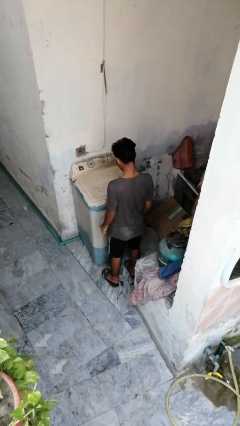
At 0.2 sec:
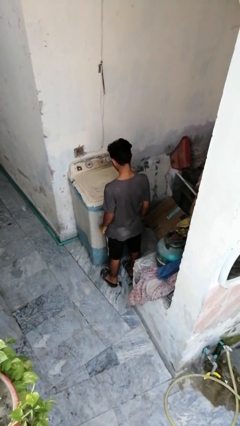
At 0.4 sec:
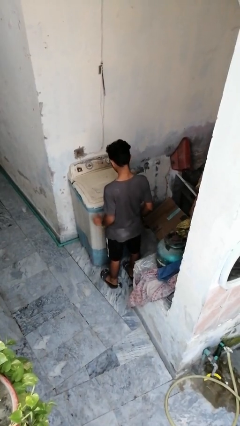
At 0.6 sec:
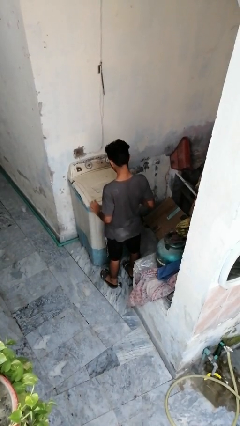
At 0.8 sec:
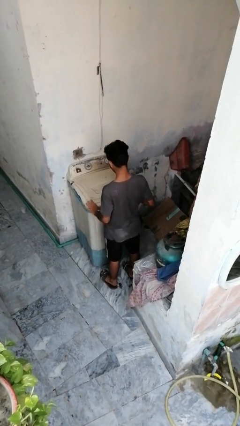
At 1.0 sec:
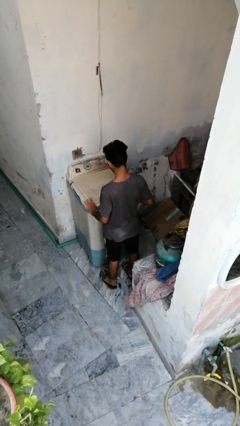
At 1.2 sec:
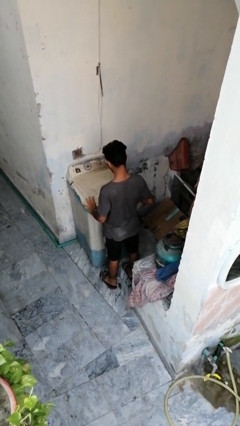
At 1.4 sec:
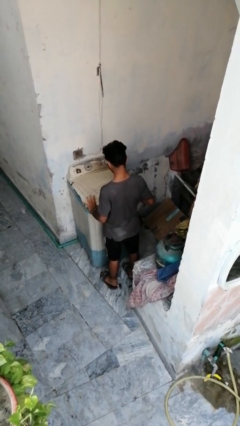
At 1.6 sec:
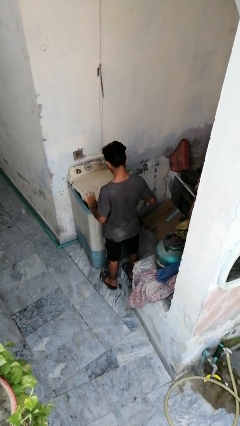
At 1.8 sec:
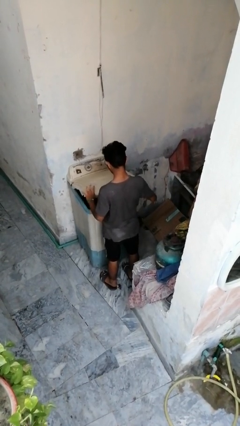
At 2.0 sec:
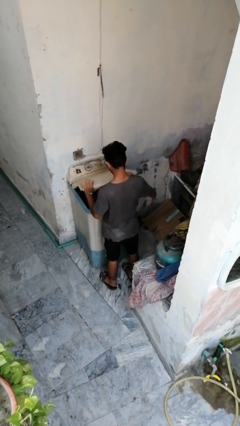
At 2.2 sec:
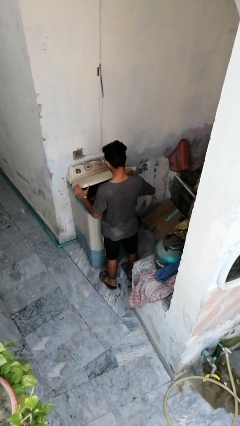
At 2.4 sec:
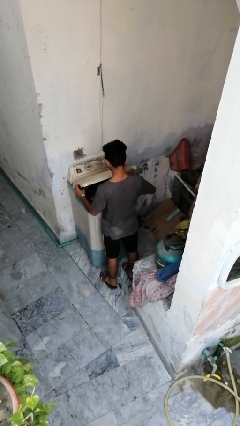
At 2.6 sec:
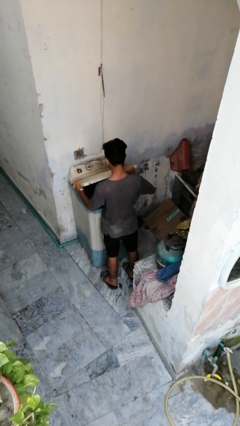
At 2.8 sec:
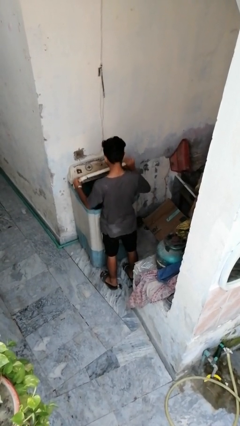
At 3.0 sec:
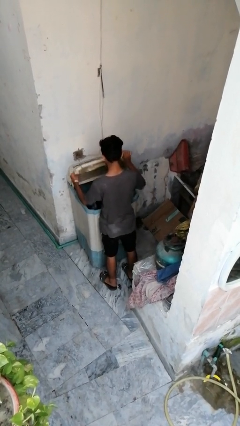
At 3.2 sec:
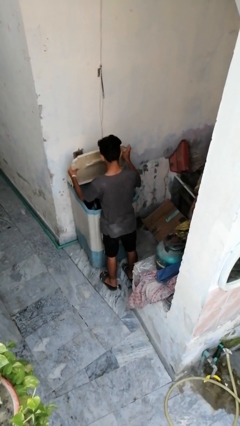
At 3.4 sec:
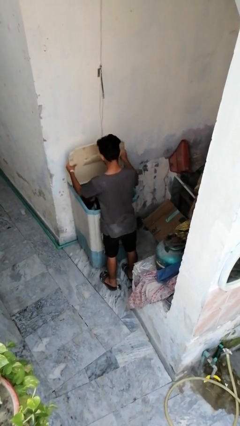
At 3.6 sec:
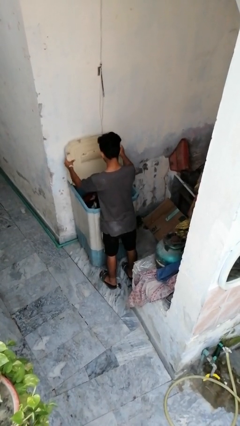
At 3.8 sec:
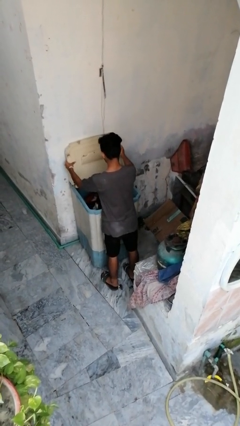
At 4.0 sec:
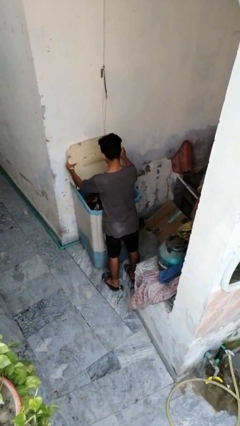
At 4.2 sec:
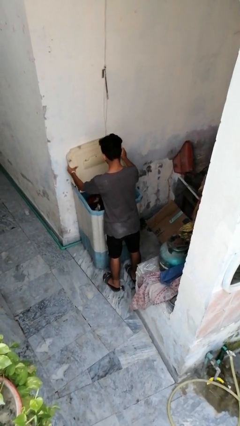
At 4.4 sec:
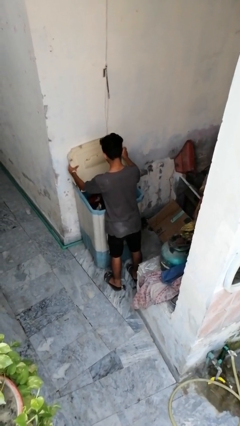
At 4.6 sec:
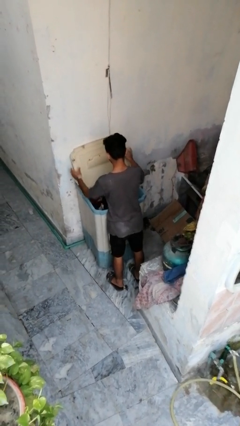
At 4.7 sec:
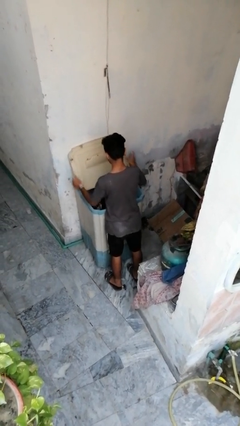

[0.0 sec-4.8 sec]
person opens clothes washer

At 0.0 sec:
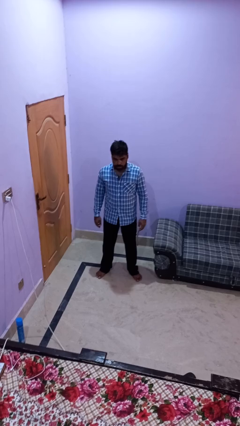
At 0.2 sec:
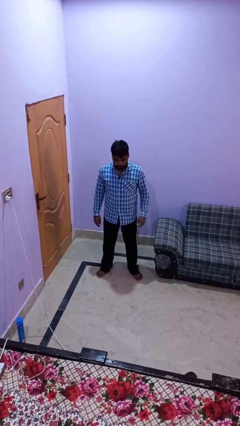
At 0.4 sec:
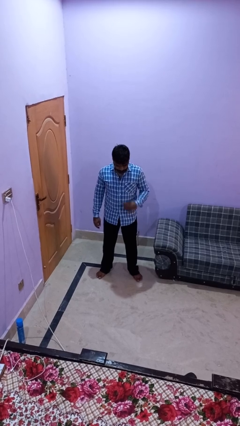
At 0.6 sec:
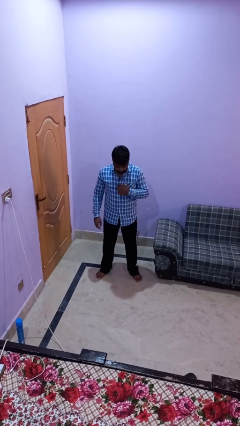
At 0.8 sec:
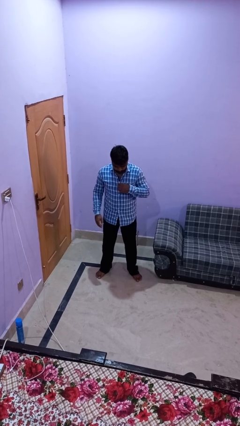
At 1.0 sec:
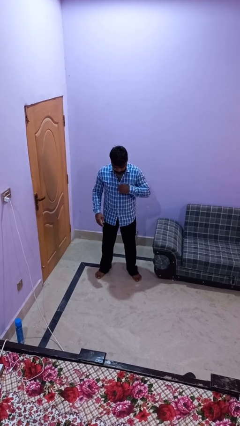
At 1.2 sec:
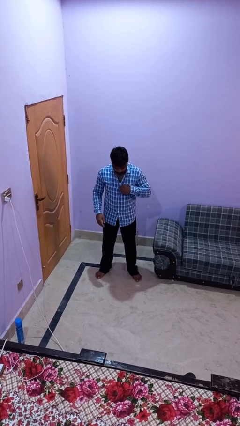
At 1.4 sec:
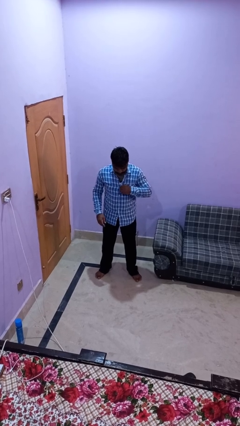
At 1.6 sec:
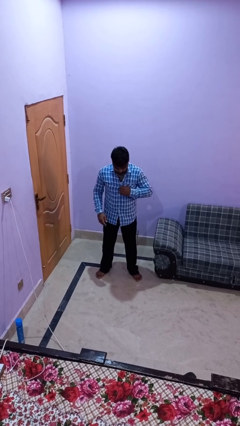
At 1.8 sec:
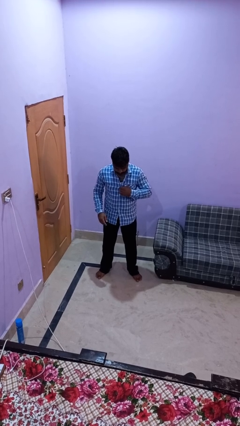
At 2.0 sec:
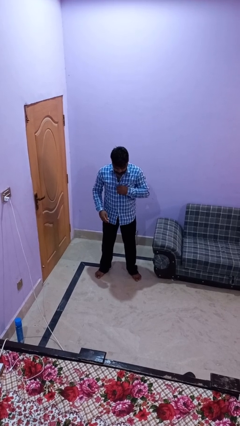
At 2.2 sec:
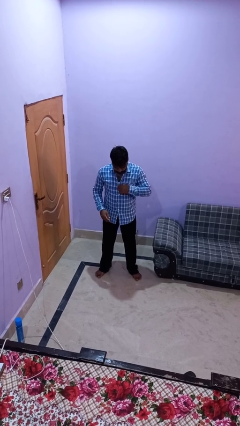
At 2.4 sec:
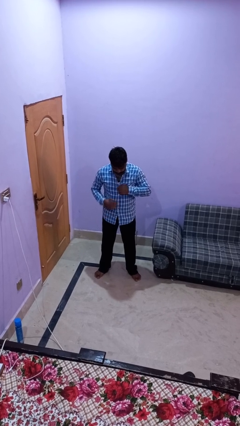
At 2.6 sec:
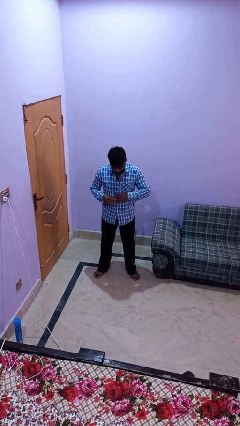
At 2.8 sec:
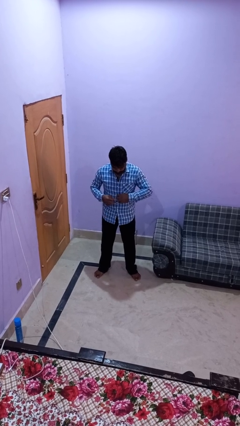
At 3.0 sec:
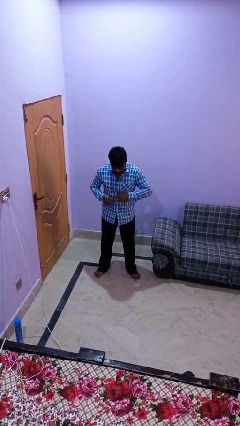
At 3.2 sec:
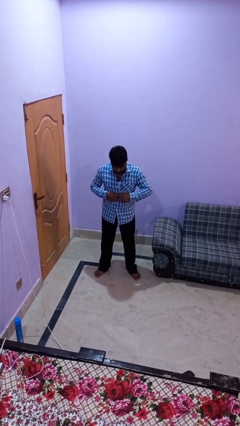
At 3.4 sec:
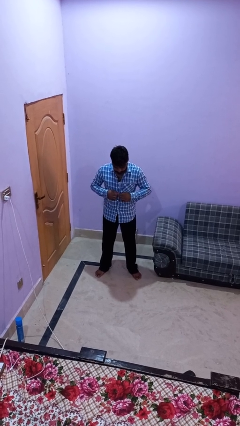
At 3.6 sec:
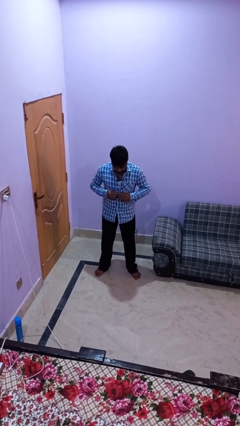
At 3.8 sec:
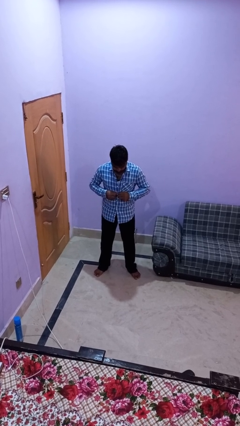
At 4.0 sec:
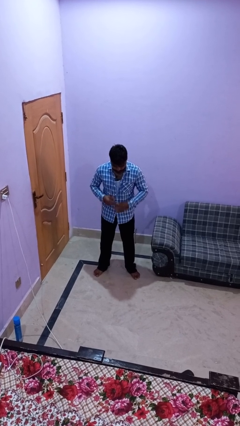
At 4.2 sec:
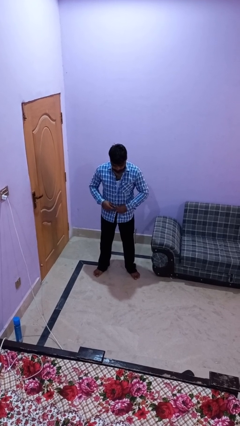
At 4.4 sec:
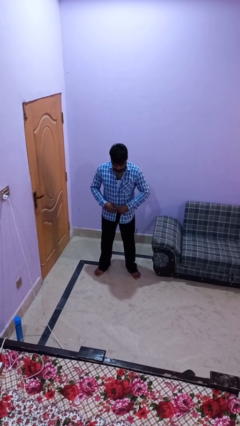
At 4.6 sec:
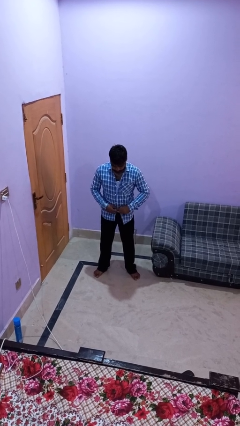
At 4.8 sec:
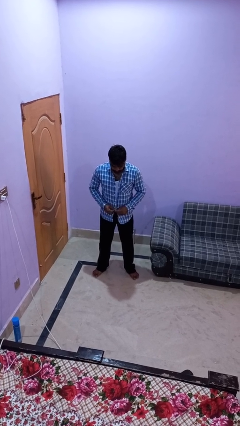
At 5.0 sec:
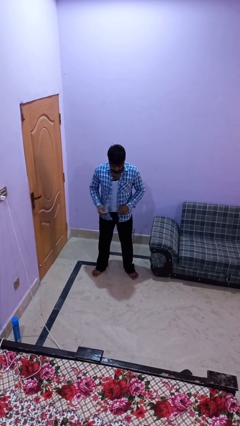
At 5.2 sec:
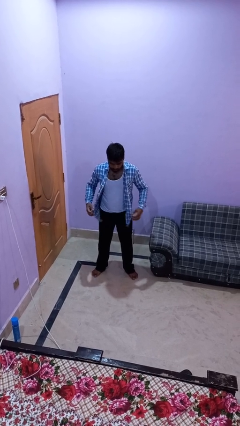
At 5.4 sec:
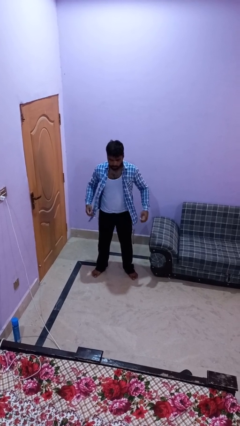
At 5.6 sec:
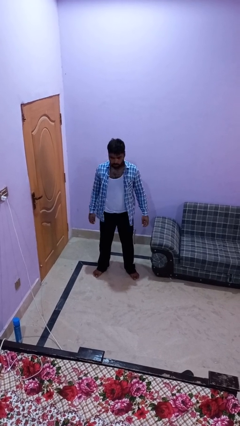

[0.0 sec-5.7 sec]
person unbuttons shirt

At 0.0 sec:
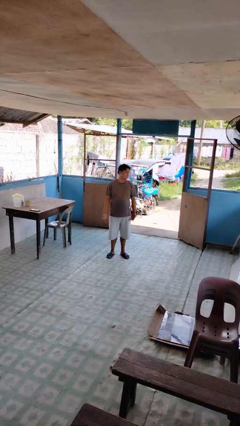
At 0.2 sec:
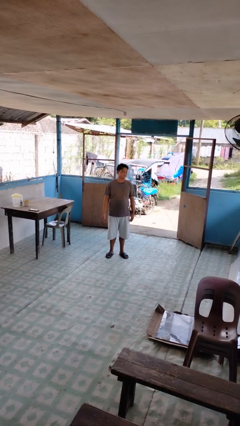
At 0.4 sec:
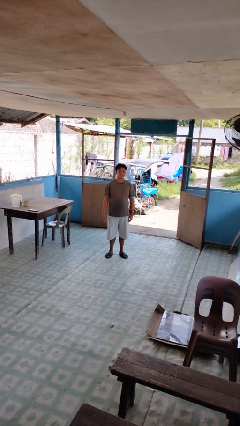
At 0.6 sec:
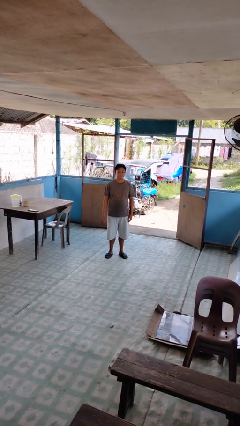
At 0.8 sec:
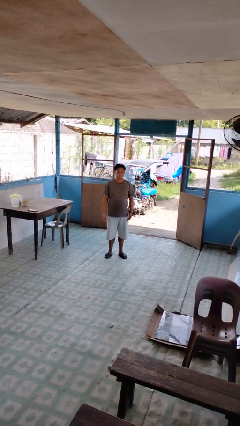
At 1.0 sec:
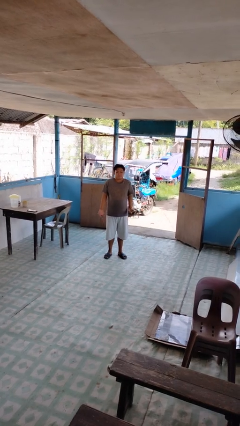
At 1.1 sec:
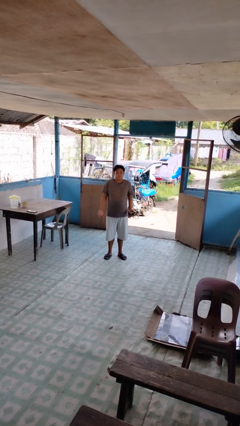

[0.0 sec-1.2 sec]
person shrugs

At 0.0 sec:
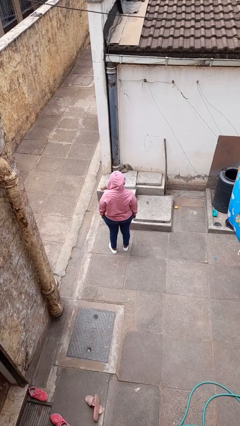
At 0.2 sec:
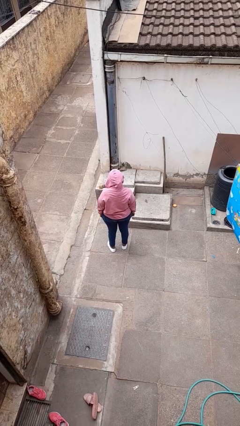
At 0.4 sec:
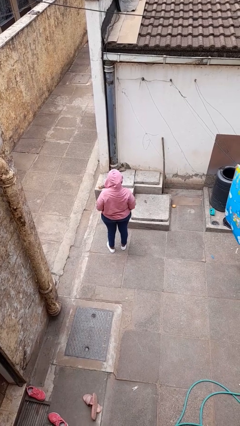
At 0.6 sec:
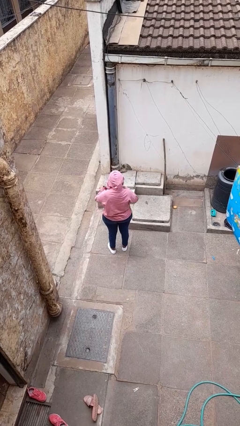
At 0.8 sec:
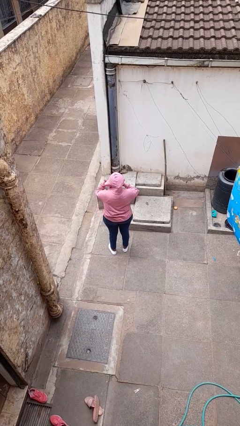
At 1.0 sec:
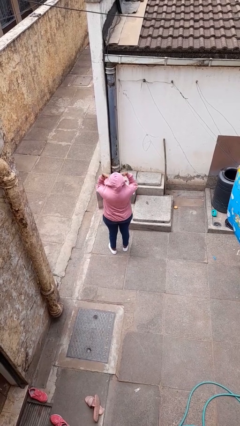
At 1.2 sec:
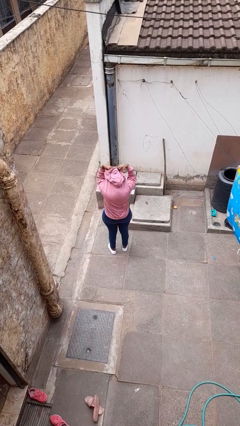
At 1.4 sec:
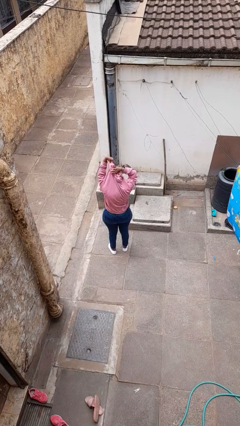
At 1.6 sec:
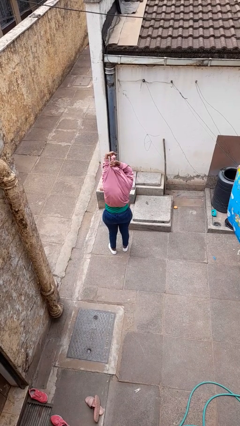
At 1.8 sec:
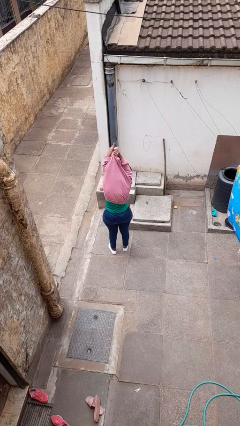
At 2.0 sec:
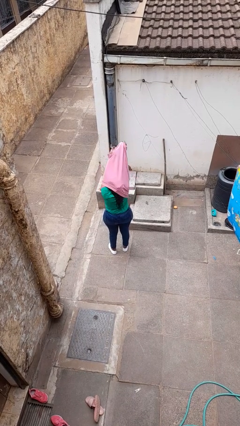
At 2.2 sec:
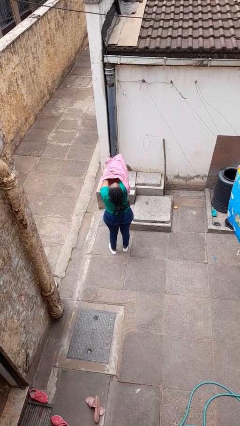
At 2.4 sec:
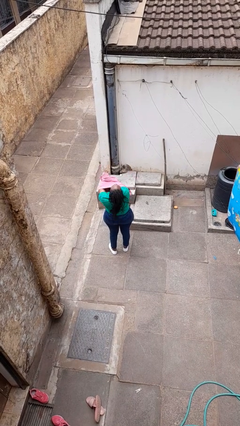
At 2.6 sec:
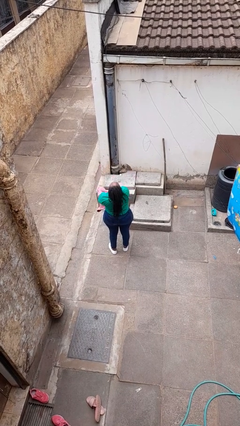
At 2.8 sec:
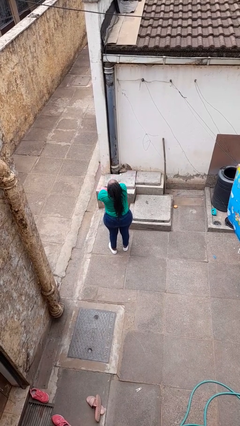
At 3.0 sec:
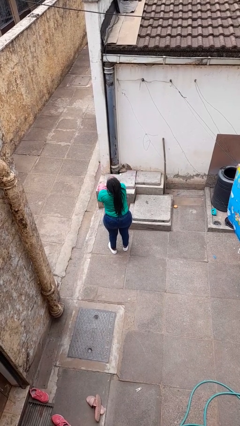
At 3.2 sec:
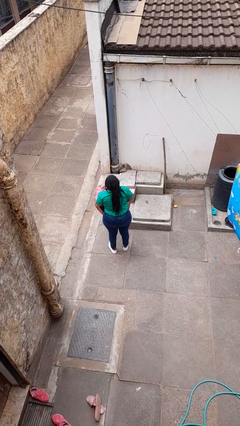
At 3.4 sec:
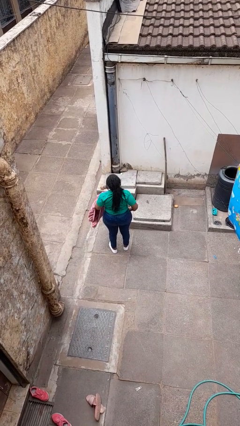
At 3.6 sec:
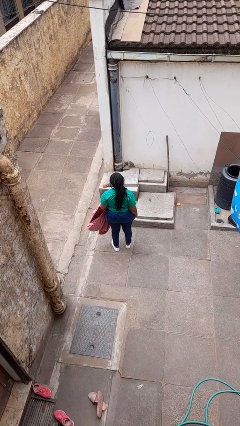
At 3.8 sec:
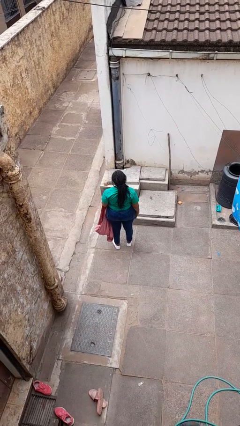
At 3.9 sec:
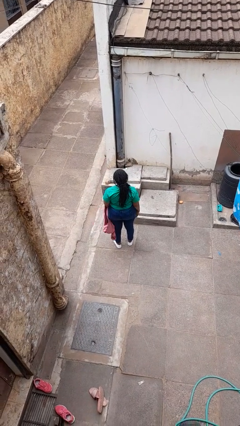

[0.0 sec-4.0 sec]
person takes off hoodie

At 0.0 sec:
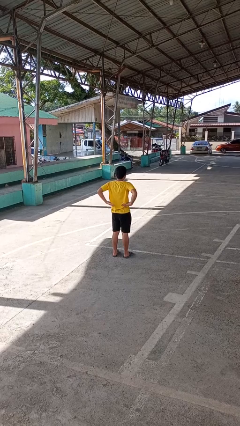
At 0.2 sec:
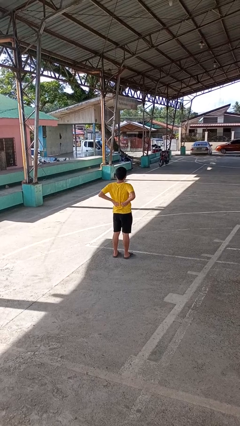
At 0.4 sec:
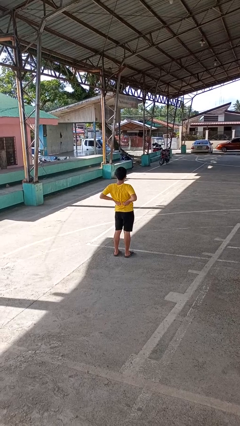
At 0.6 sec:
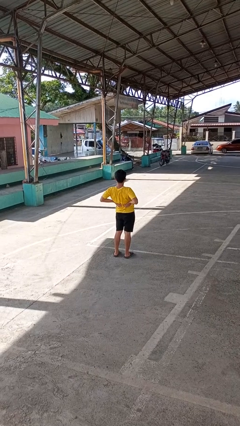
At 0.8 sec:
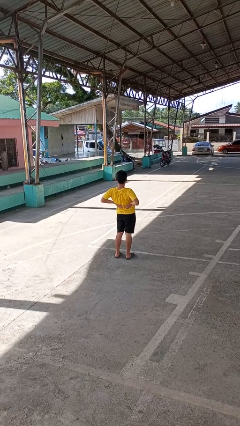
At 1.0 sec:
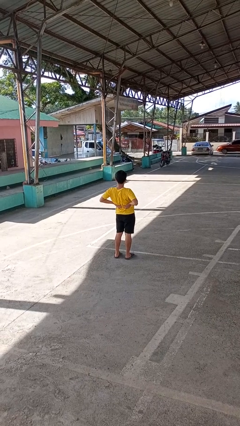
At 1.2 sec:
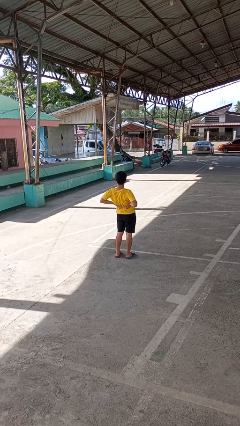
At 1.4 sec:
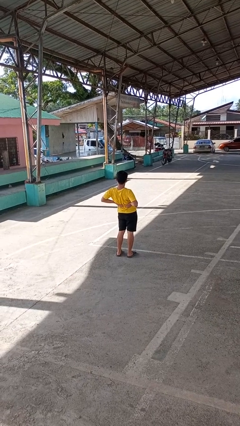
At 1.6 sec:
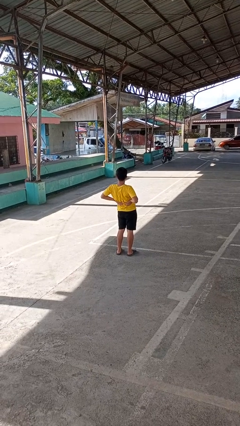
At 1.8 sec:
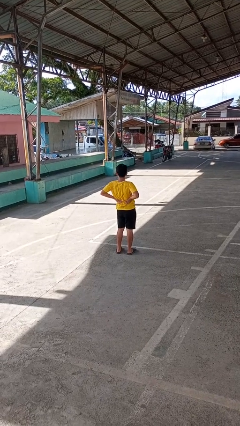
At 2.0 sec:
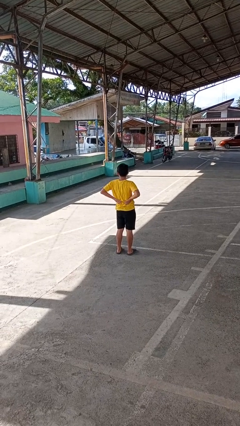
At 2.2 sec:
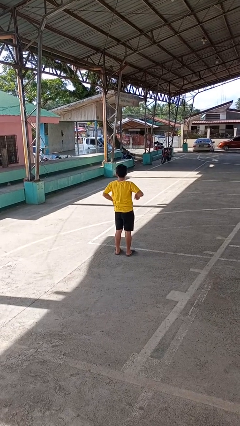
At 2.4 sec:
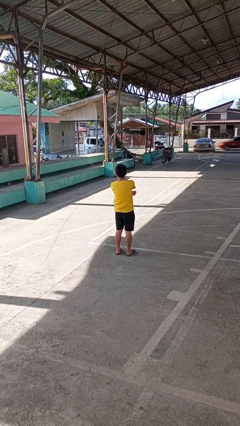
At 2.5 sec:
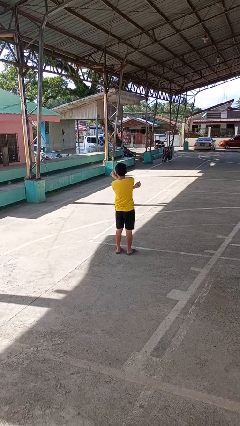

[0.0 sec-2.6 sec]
person stretches back
